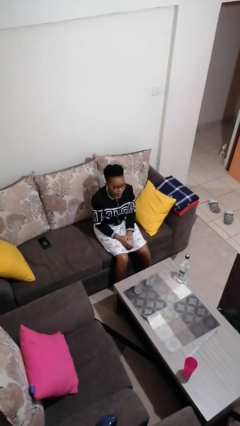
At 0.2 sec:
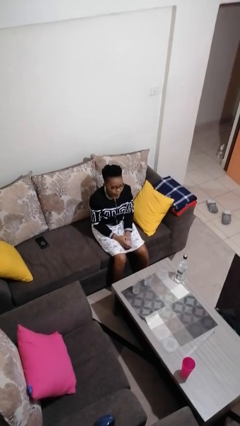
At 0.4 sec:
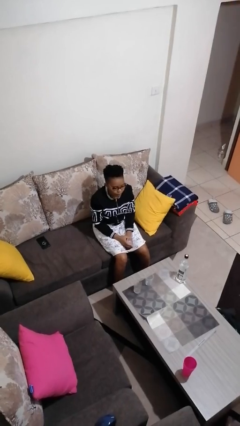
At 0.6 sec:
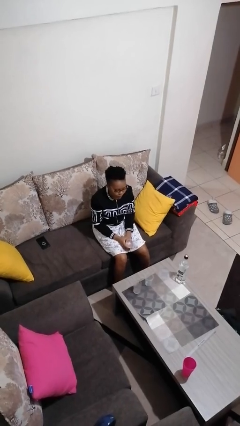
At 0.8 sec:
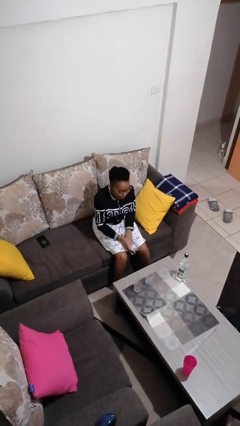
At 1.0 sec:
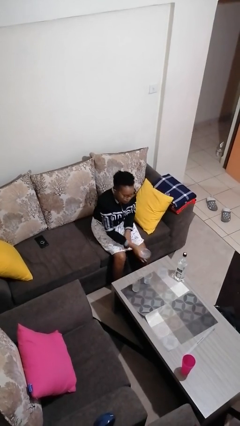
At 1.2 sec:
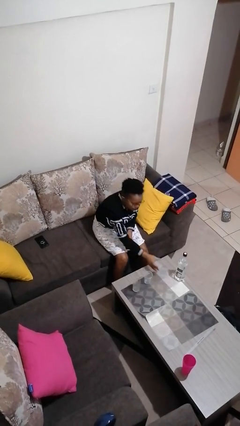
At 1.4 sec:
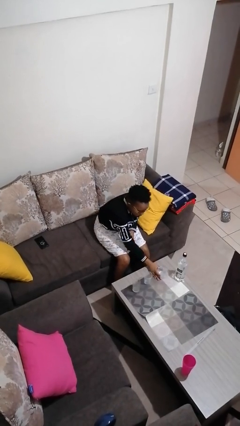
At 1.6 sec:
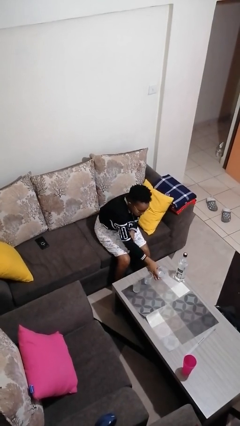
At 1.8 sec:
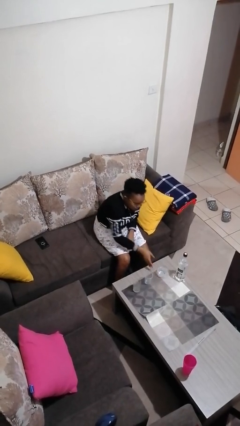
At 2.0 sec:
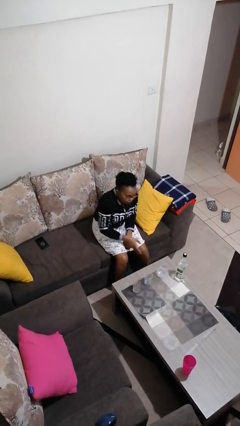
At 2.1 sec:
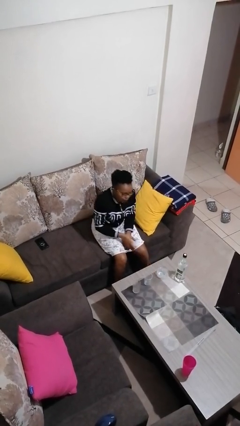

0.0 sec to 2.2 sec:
person puts down object on table

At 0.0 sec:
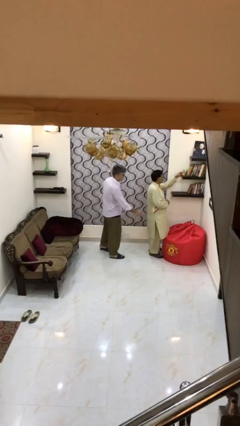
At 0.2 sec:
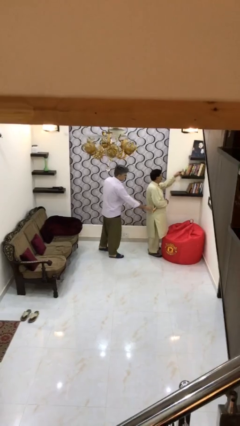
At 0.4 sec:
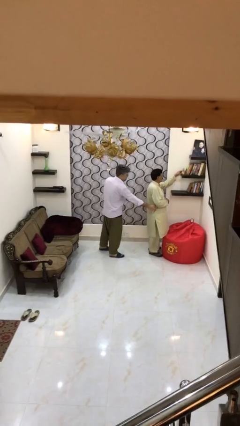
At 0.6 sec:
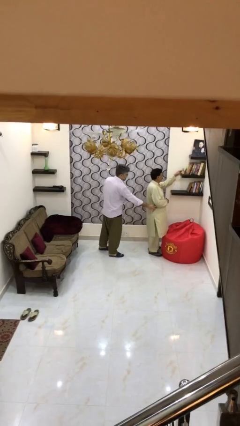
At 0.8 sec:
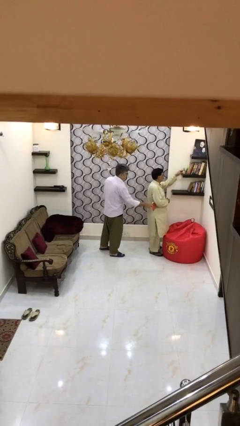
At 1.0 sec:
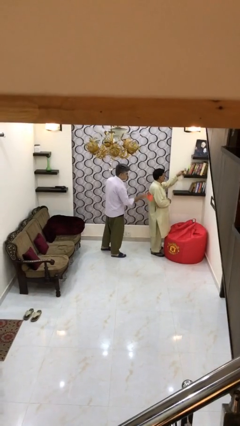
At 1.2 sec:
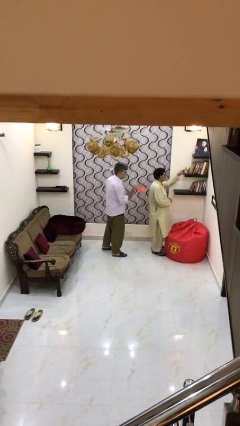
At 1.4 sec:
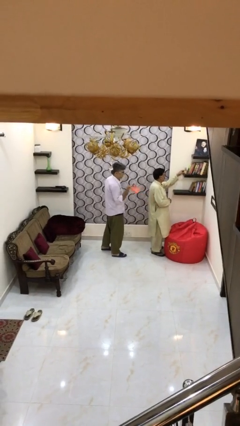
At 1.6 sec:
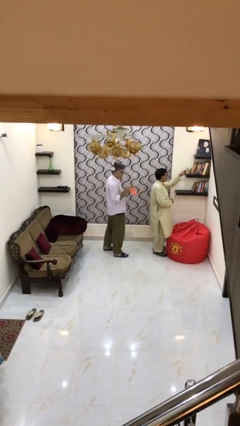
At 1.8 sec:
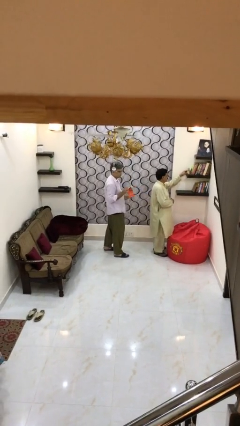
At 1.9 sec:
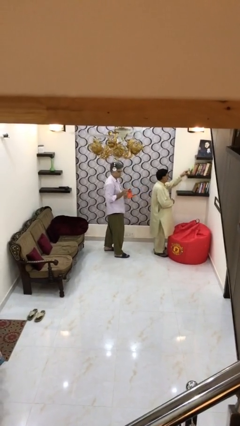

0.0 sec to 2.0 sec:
person steals object from person

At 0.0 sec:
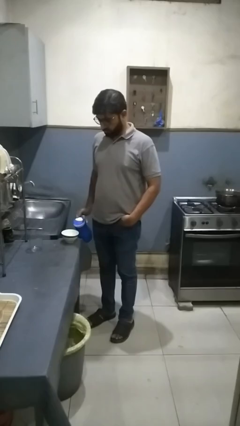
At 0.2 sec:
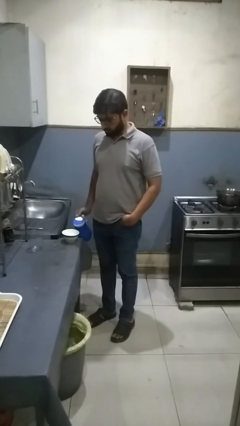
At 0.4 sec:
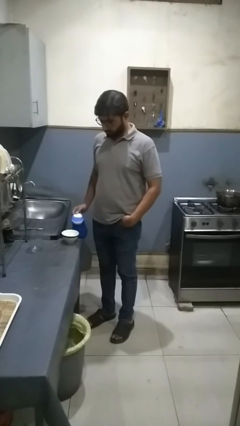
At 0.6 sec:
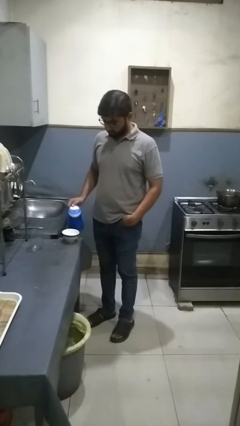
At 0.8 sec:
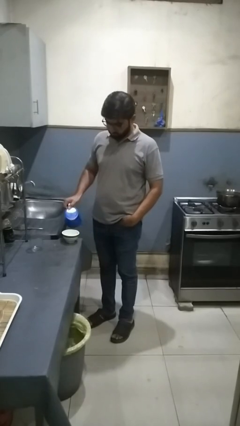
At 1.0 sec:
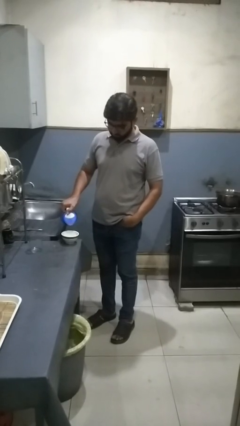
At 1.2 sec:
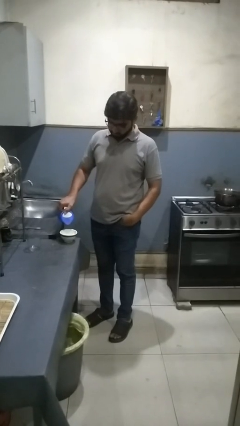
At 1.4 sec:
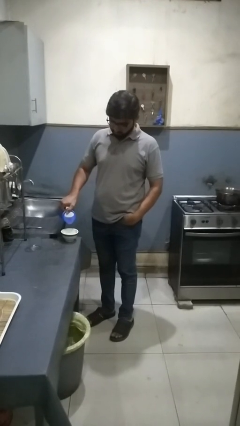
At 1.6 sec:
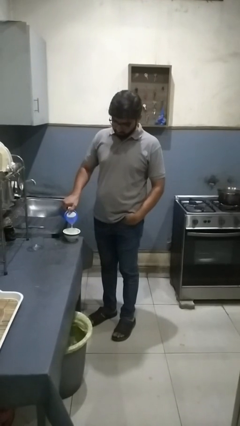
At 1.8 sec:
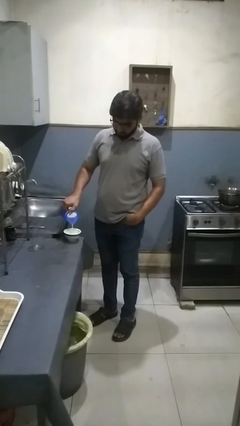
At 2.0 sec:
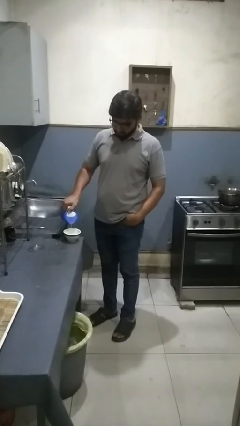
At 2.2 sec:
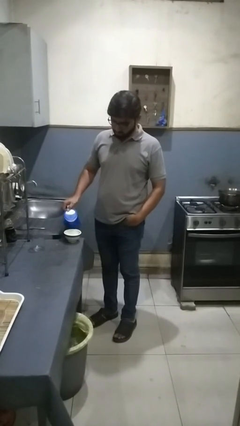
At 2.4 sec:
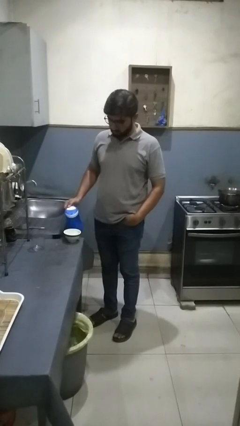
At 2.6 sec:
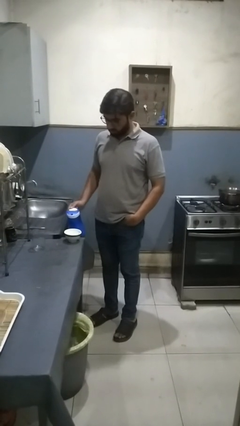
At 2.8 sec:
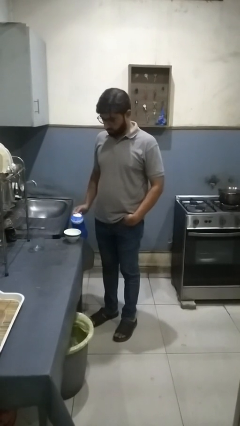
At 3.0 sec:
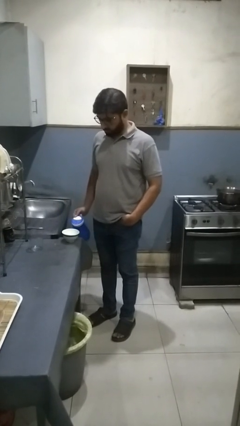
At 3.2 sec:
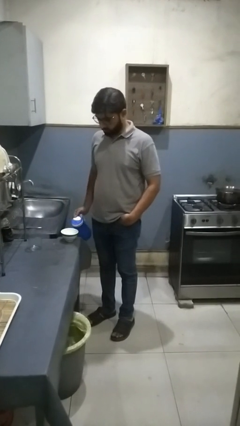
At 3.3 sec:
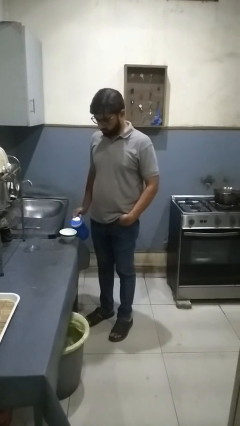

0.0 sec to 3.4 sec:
person pours into bowl

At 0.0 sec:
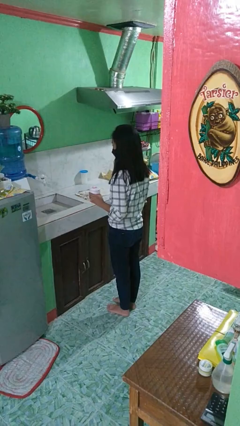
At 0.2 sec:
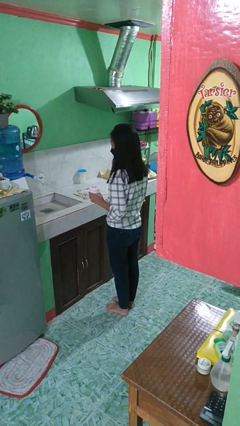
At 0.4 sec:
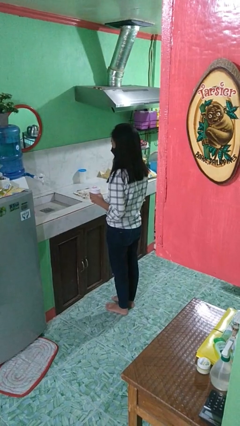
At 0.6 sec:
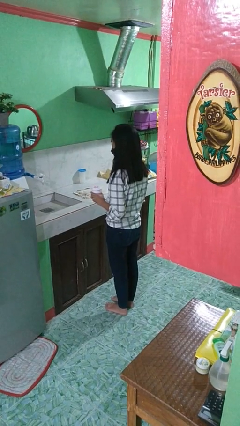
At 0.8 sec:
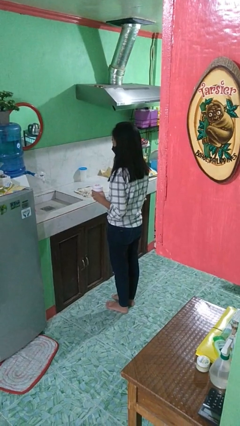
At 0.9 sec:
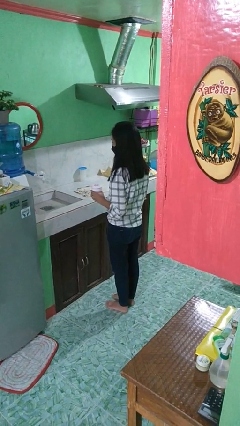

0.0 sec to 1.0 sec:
person puts down object on countertop

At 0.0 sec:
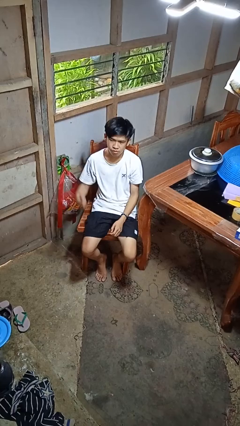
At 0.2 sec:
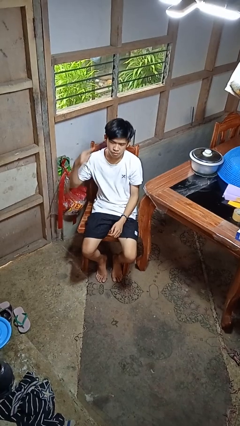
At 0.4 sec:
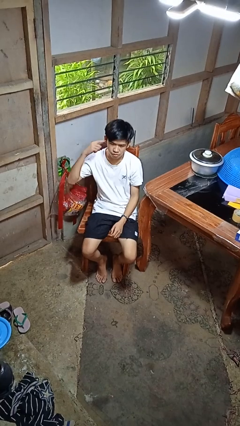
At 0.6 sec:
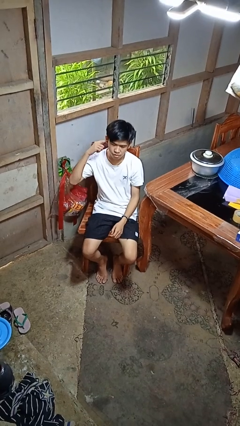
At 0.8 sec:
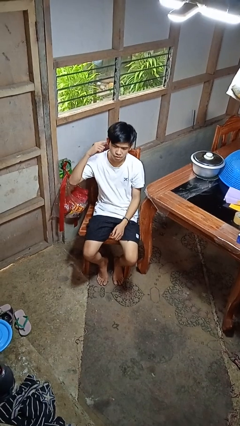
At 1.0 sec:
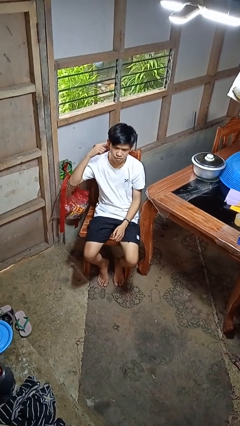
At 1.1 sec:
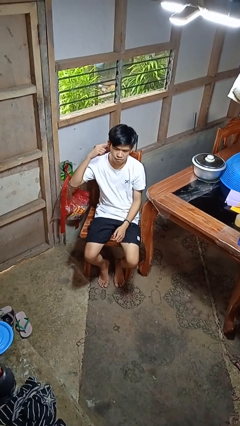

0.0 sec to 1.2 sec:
person gestures listen closely

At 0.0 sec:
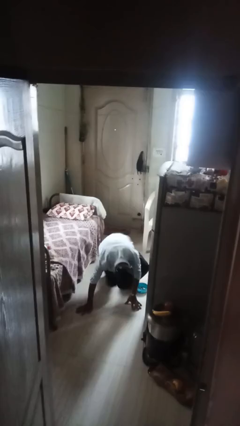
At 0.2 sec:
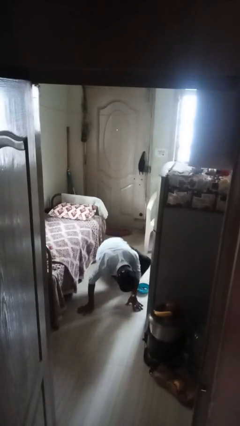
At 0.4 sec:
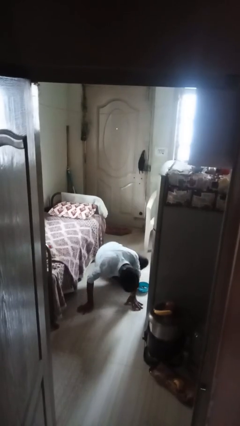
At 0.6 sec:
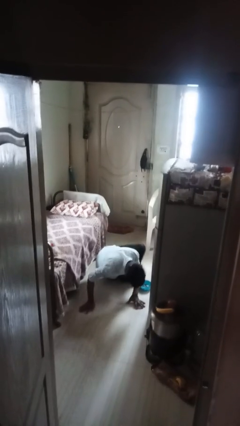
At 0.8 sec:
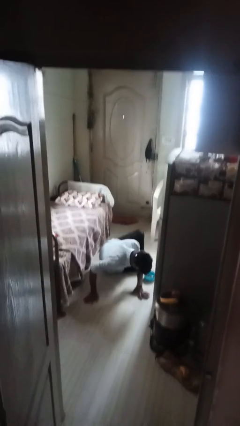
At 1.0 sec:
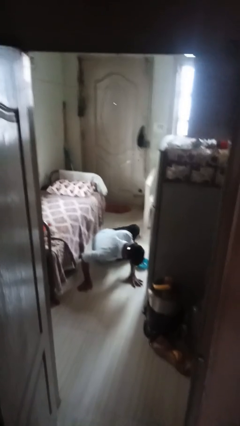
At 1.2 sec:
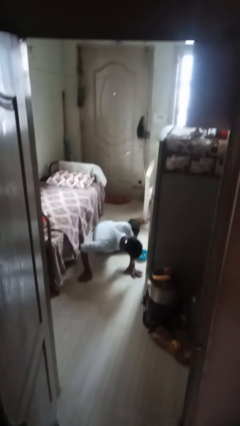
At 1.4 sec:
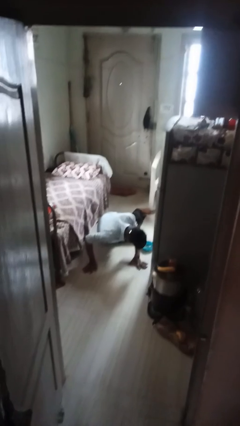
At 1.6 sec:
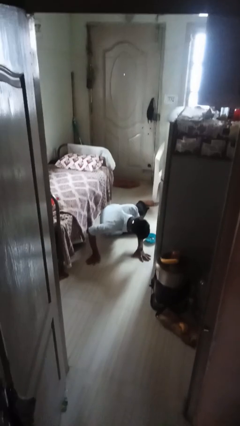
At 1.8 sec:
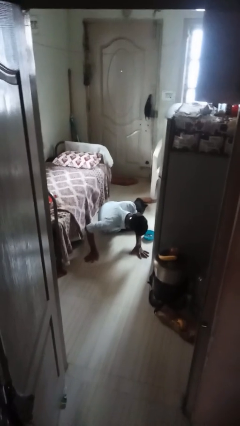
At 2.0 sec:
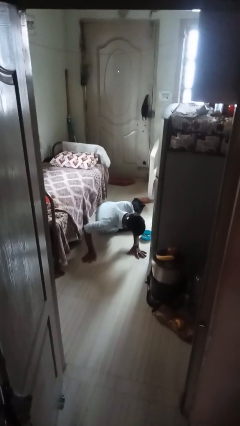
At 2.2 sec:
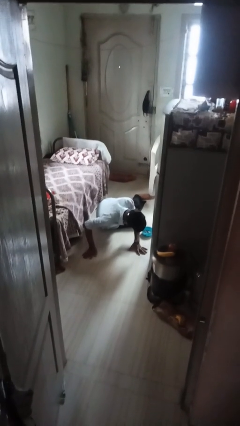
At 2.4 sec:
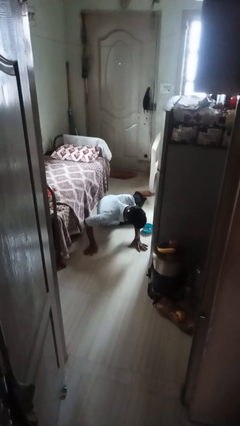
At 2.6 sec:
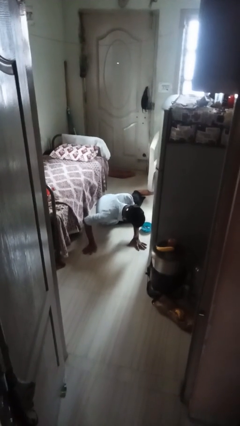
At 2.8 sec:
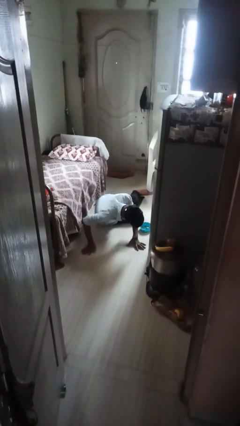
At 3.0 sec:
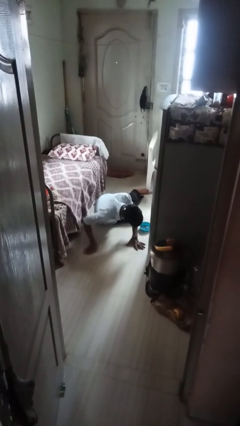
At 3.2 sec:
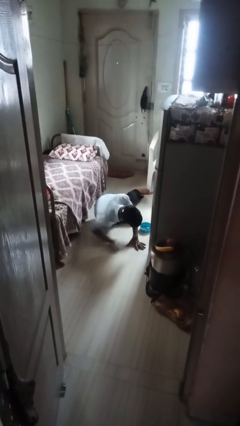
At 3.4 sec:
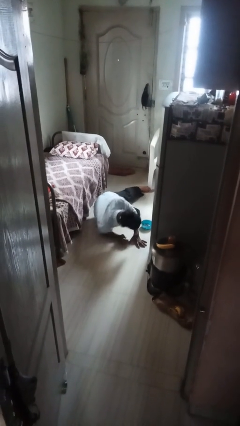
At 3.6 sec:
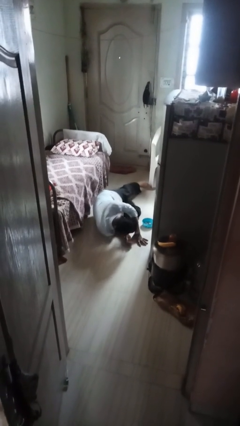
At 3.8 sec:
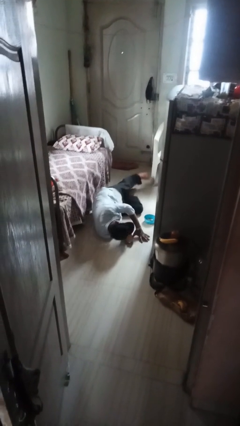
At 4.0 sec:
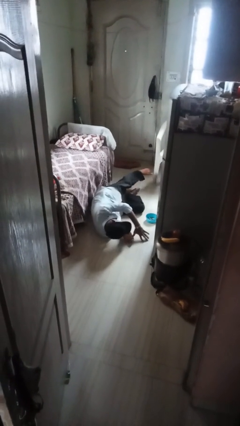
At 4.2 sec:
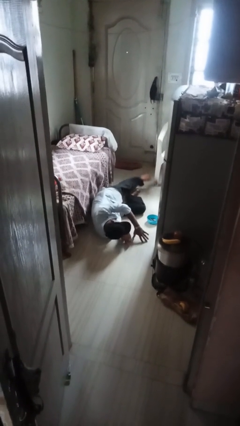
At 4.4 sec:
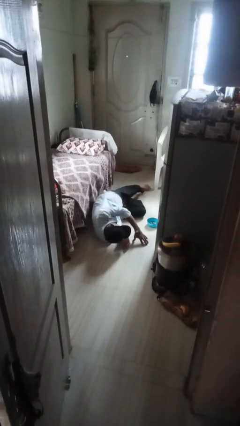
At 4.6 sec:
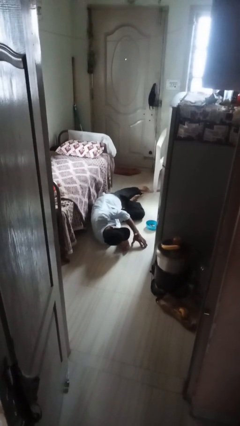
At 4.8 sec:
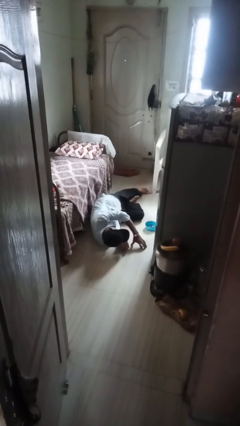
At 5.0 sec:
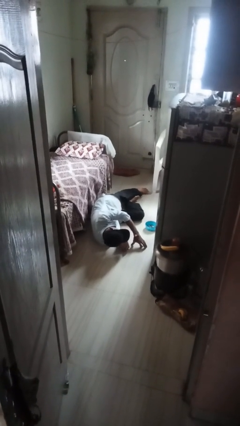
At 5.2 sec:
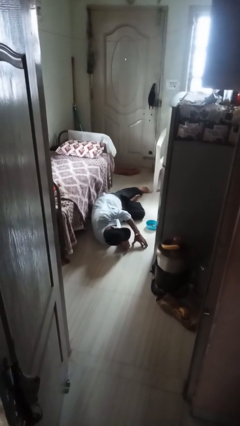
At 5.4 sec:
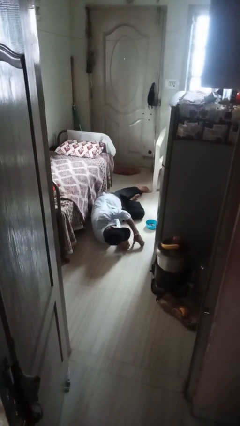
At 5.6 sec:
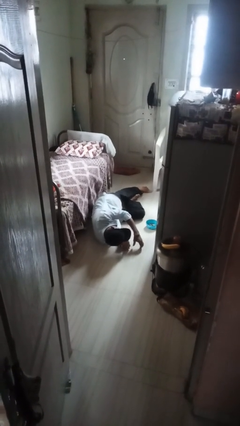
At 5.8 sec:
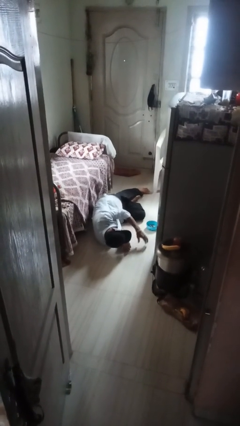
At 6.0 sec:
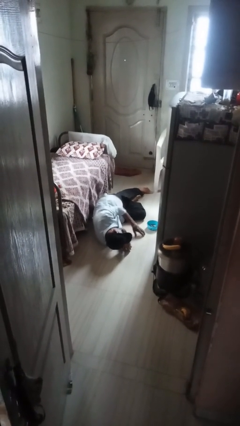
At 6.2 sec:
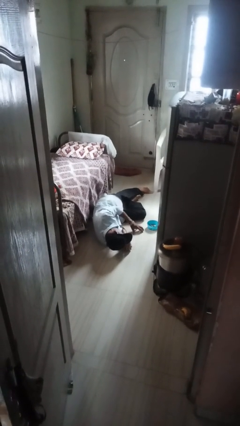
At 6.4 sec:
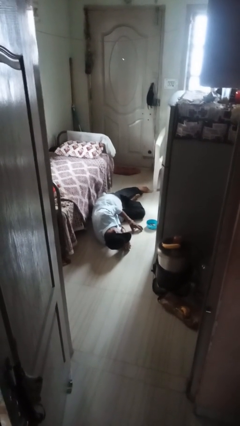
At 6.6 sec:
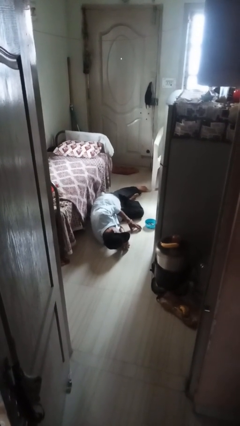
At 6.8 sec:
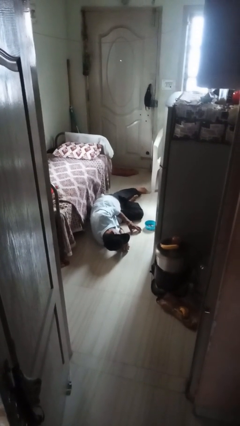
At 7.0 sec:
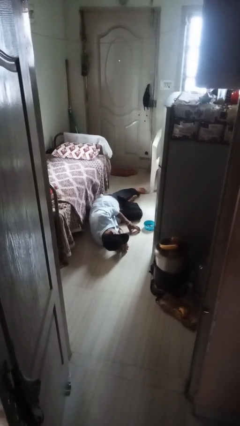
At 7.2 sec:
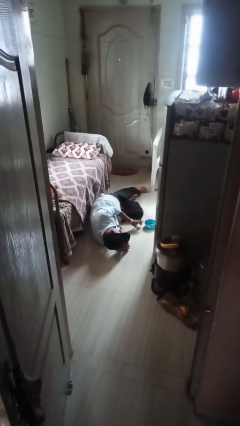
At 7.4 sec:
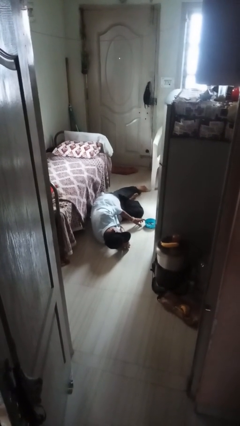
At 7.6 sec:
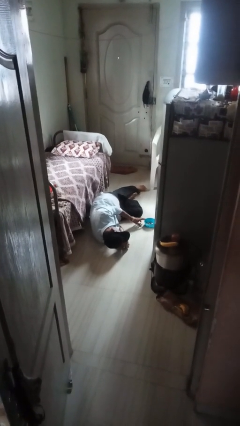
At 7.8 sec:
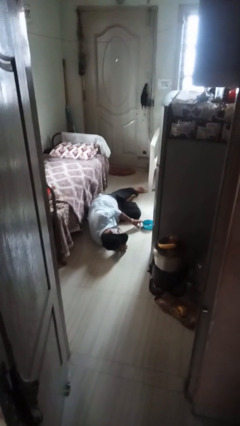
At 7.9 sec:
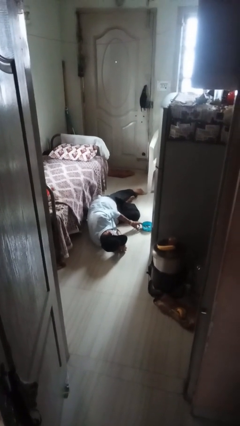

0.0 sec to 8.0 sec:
person lies down on floor
